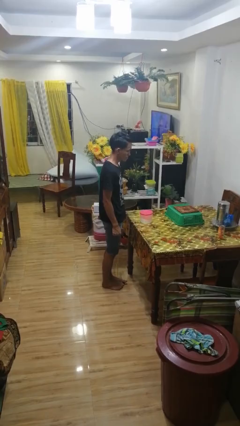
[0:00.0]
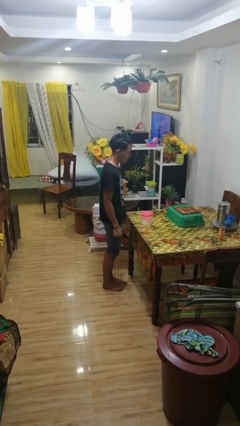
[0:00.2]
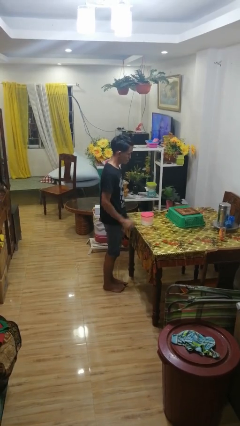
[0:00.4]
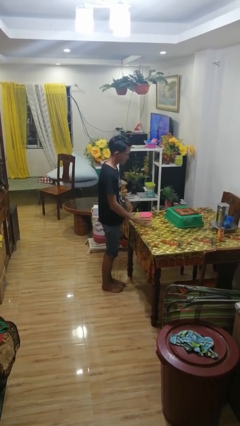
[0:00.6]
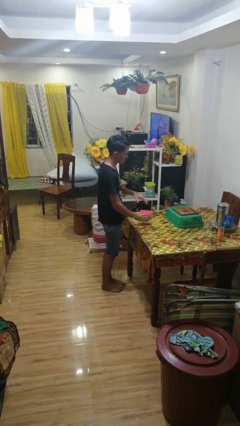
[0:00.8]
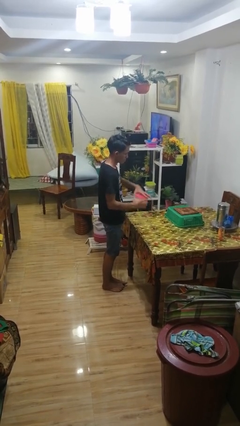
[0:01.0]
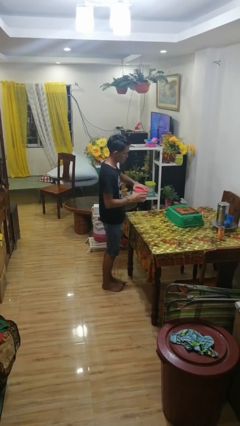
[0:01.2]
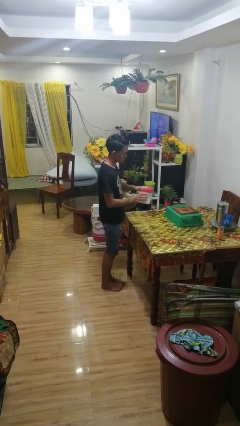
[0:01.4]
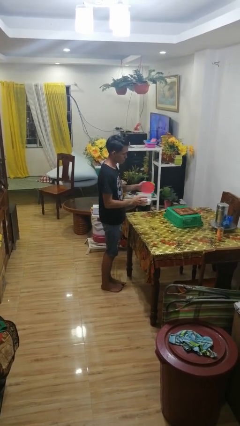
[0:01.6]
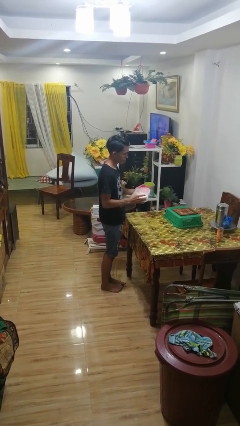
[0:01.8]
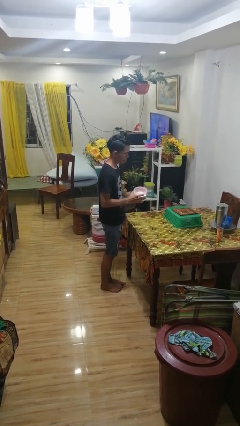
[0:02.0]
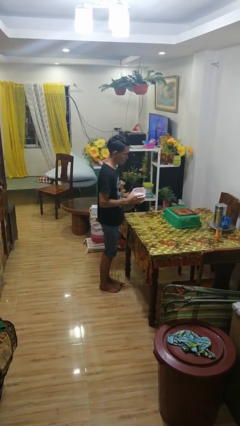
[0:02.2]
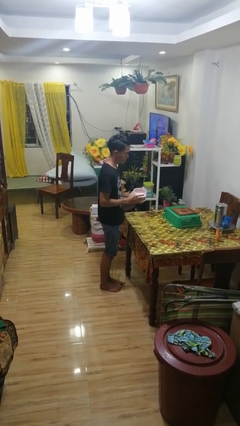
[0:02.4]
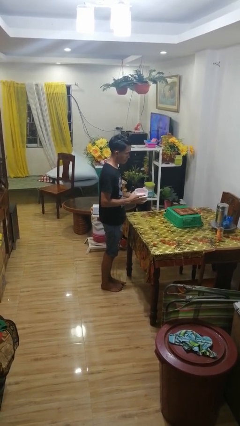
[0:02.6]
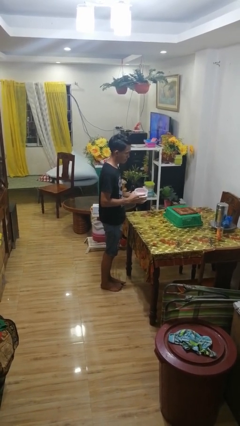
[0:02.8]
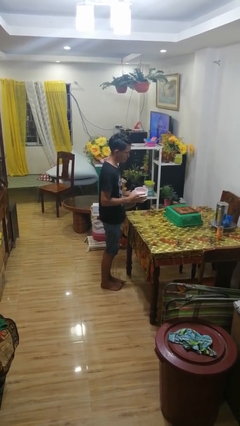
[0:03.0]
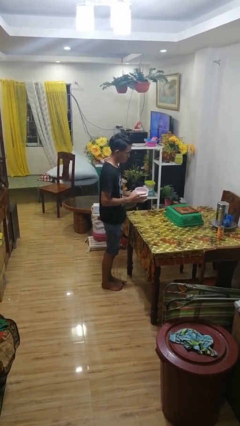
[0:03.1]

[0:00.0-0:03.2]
person opens jar

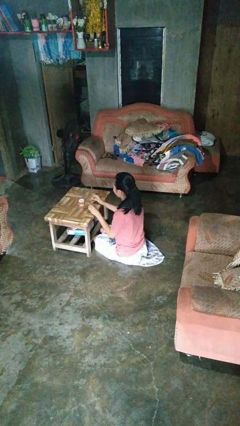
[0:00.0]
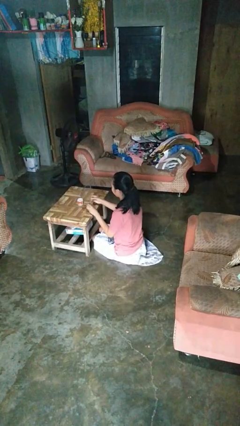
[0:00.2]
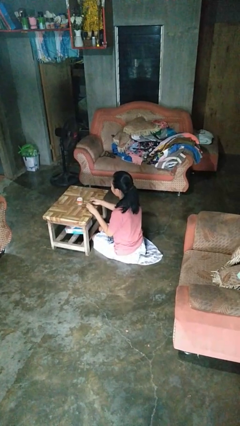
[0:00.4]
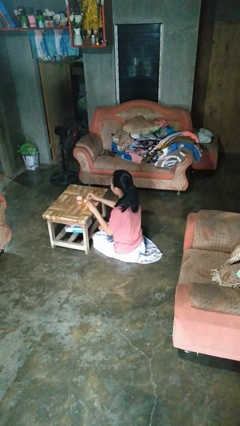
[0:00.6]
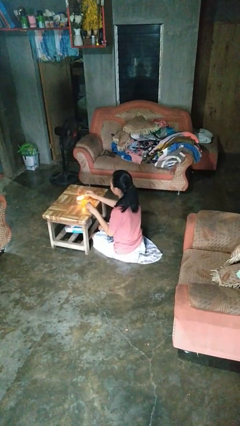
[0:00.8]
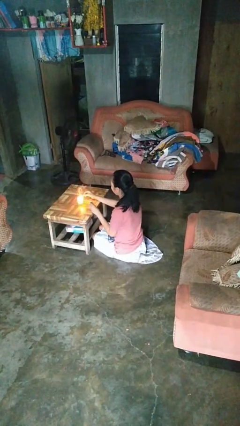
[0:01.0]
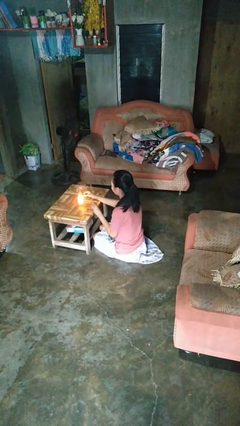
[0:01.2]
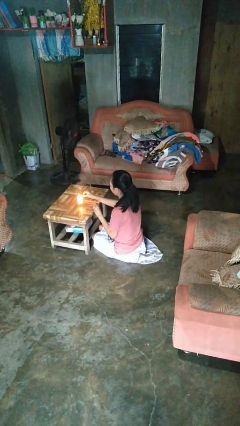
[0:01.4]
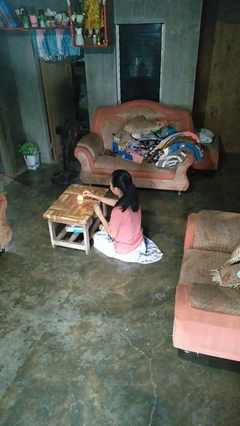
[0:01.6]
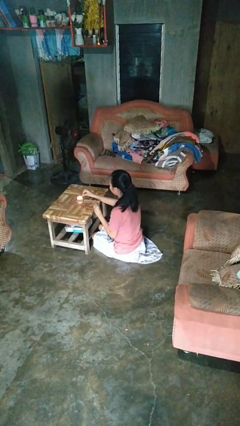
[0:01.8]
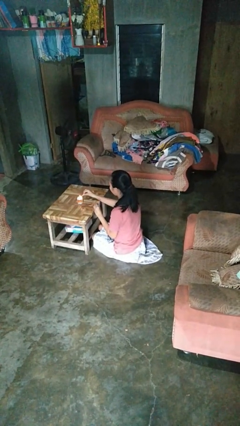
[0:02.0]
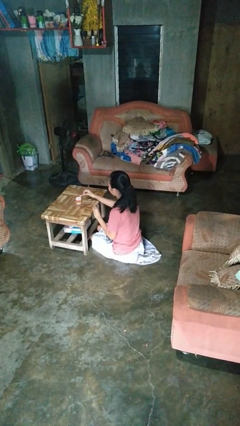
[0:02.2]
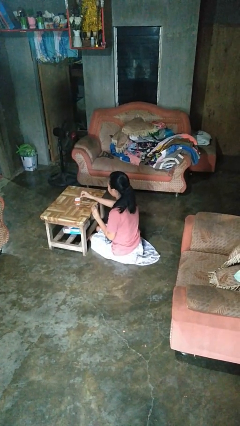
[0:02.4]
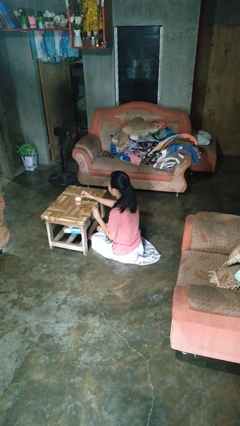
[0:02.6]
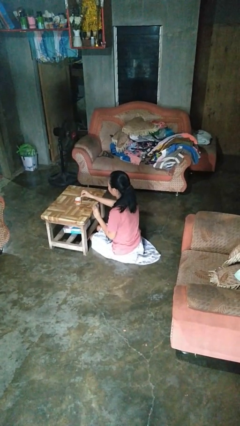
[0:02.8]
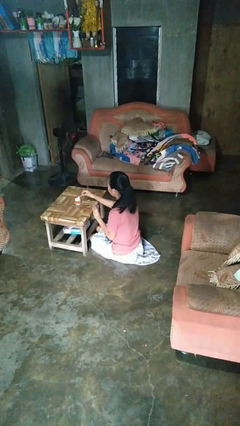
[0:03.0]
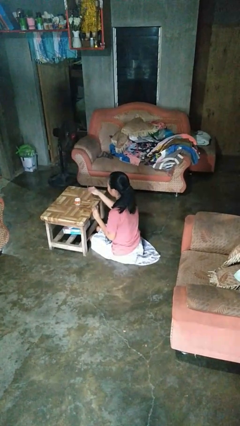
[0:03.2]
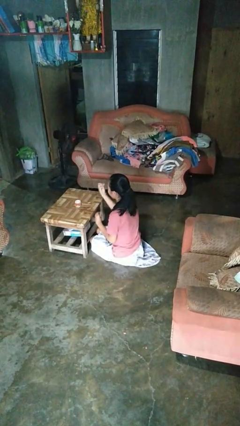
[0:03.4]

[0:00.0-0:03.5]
person lights candle

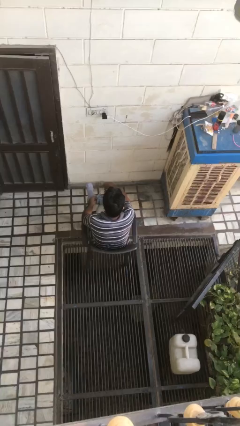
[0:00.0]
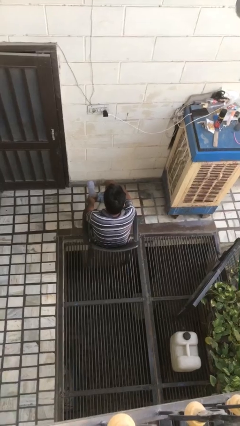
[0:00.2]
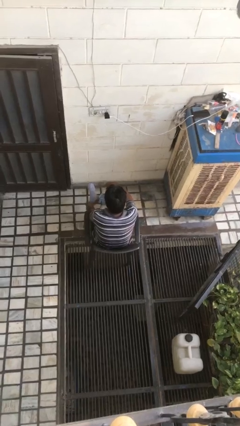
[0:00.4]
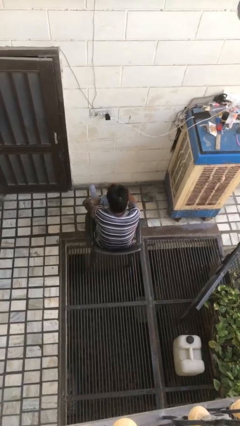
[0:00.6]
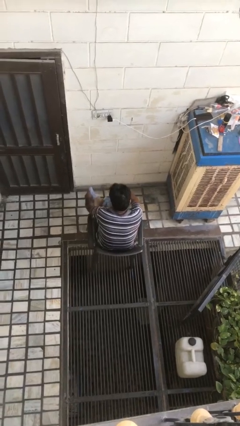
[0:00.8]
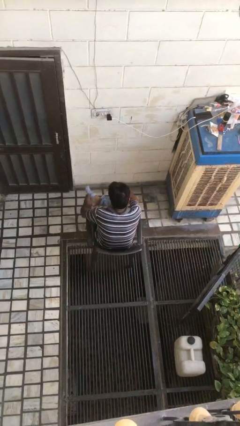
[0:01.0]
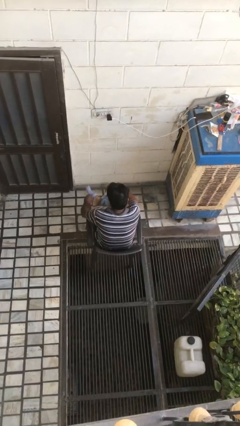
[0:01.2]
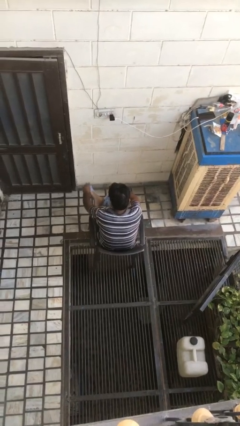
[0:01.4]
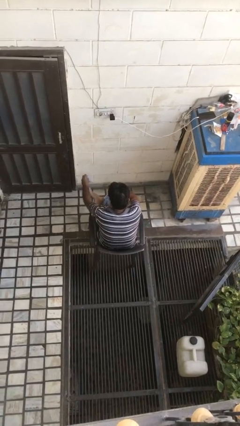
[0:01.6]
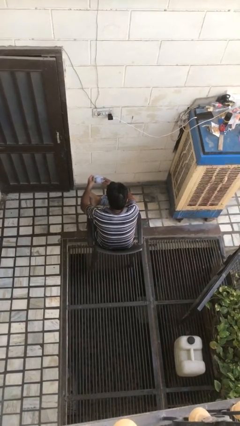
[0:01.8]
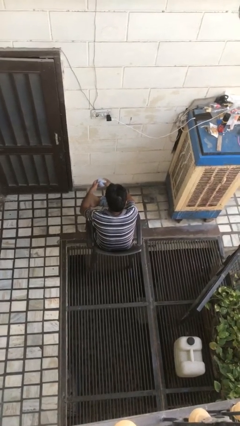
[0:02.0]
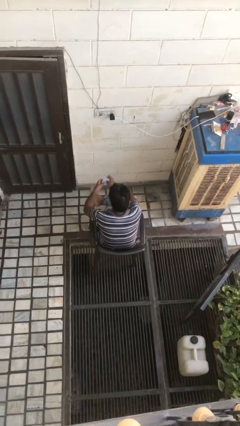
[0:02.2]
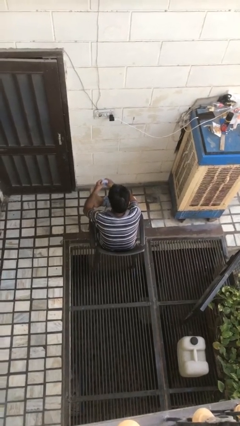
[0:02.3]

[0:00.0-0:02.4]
person takes off socks

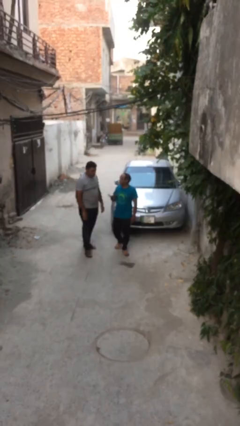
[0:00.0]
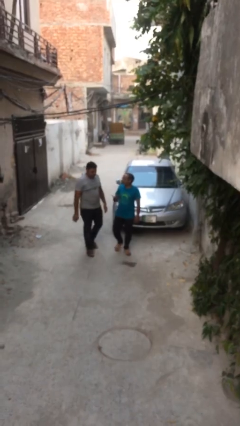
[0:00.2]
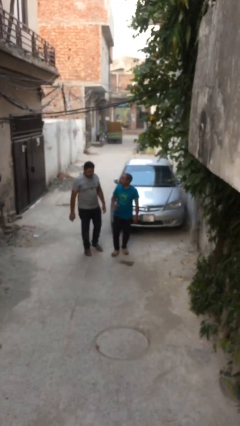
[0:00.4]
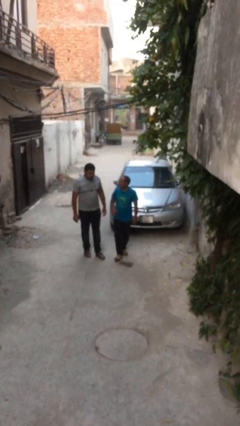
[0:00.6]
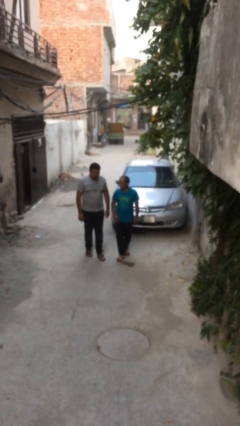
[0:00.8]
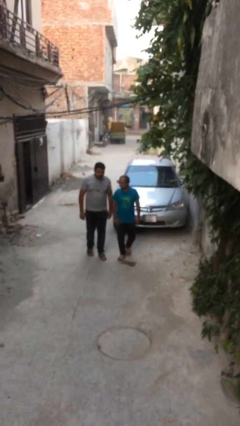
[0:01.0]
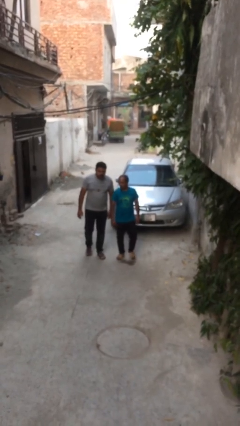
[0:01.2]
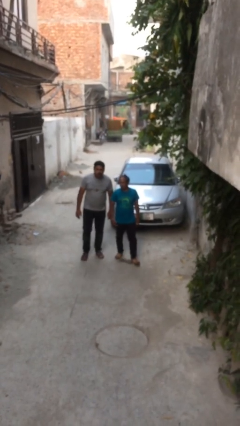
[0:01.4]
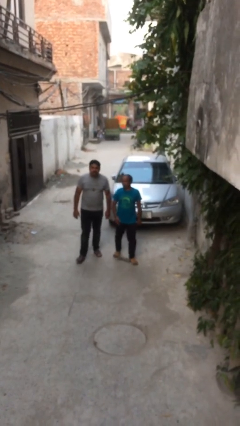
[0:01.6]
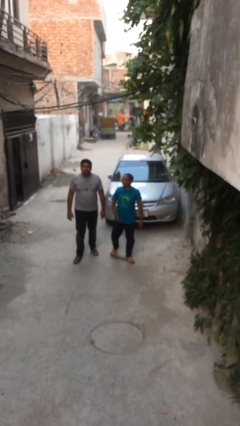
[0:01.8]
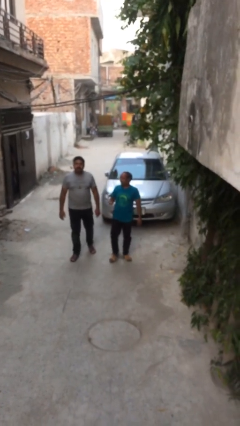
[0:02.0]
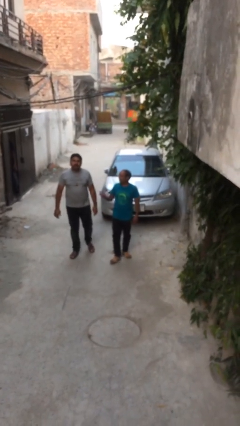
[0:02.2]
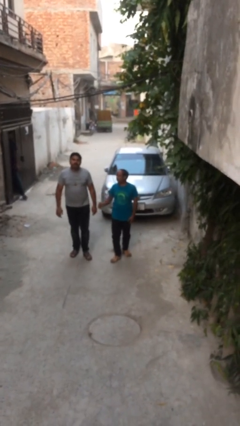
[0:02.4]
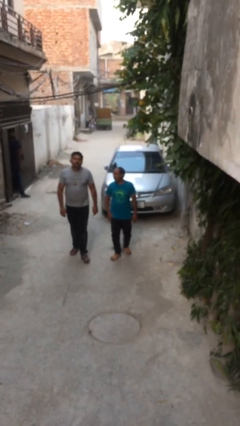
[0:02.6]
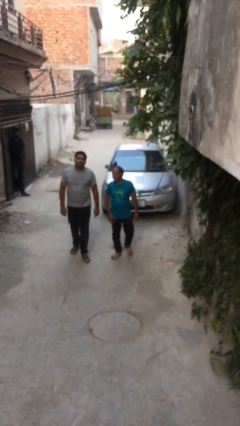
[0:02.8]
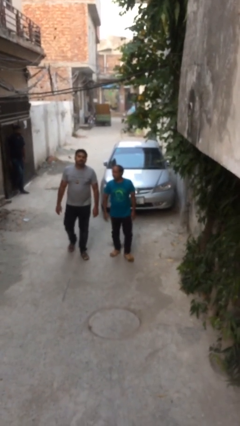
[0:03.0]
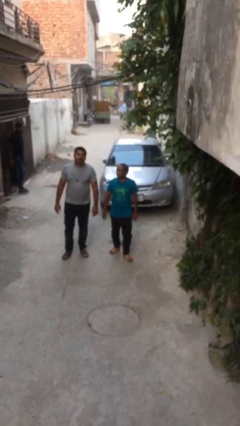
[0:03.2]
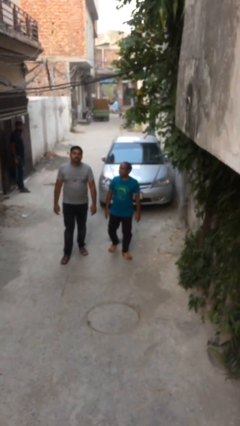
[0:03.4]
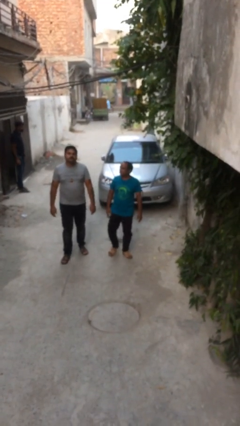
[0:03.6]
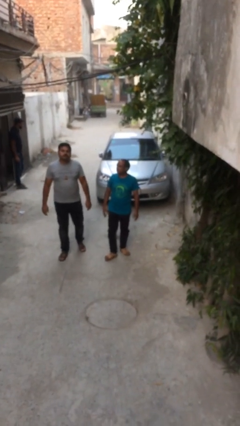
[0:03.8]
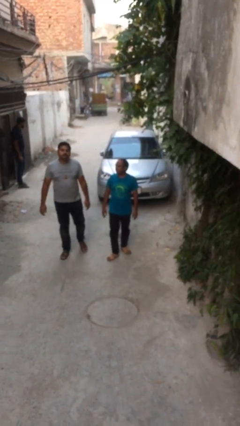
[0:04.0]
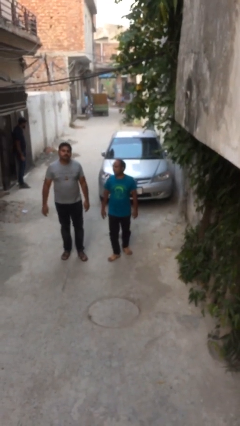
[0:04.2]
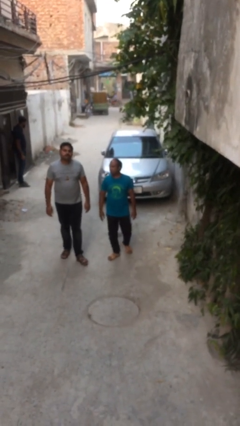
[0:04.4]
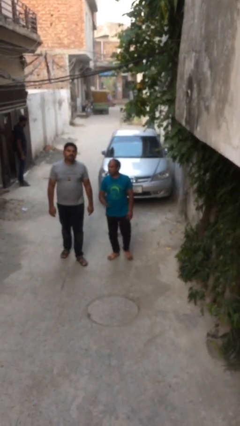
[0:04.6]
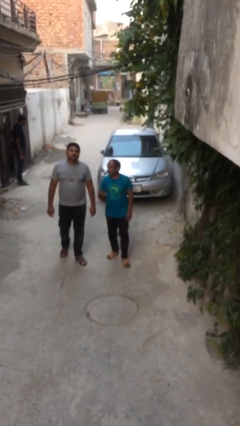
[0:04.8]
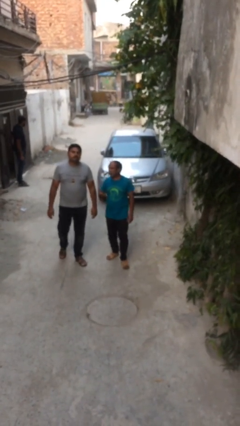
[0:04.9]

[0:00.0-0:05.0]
person talks to person

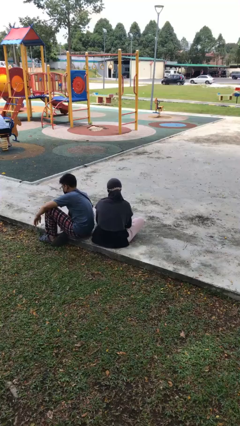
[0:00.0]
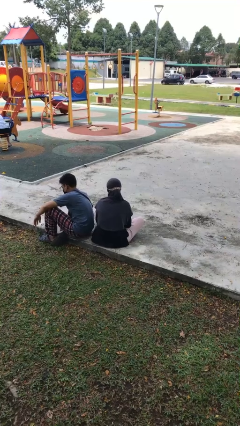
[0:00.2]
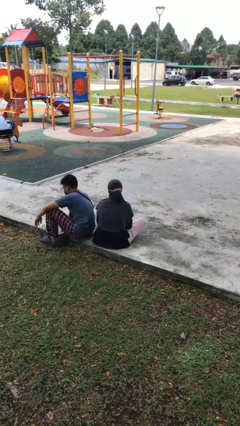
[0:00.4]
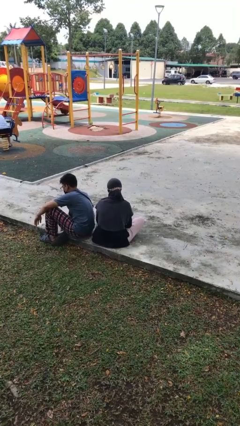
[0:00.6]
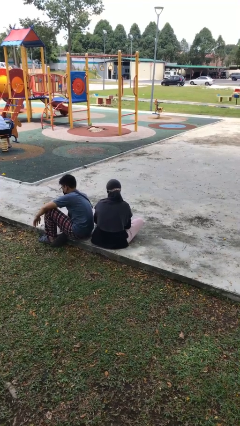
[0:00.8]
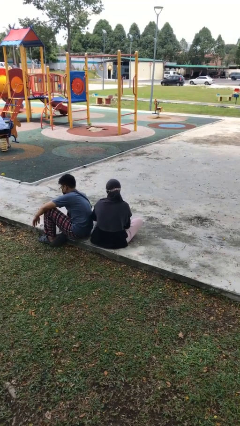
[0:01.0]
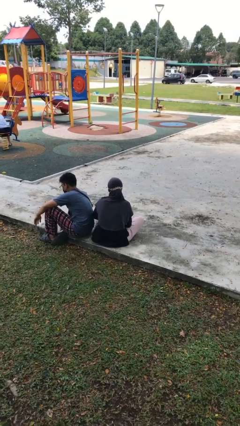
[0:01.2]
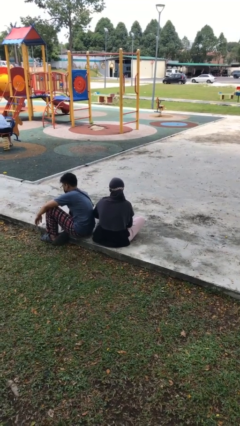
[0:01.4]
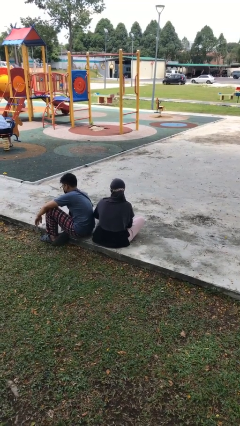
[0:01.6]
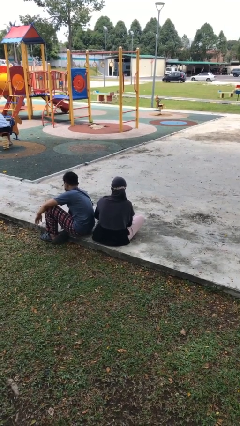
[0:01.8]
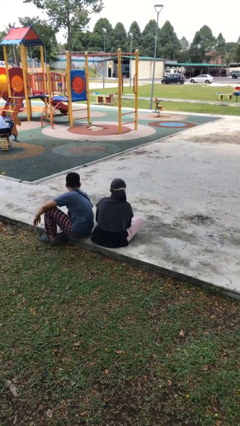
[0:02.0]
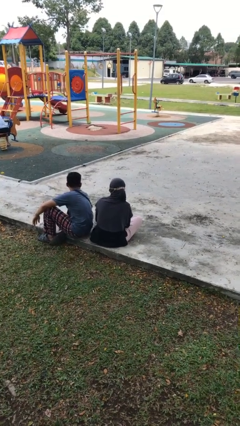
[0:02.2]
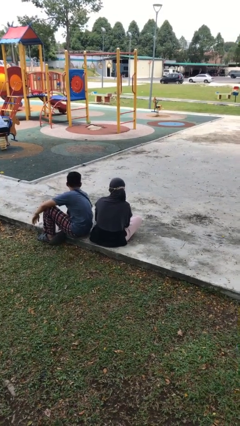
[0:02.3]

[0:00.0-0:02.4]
person nudges person with elbow

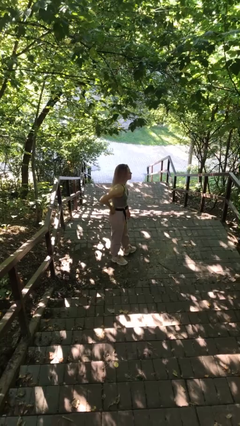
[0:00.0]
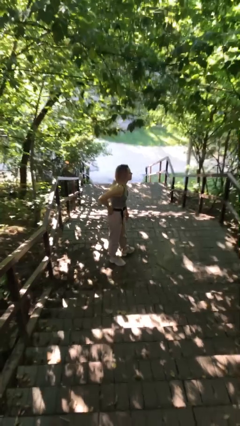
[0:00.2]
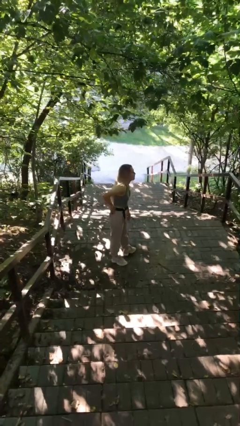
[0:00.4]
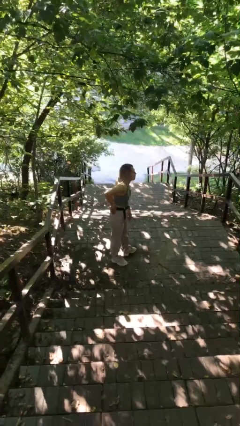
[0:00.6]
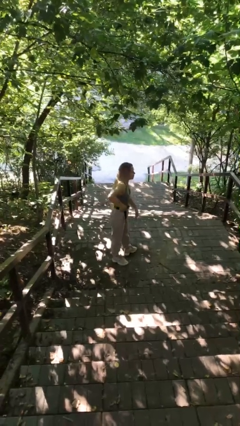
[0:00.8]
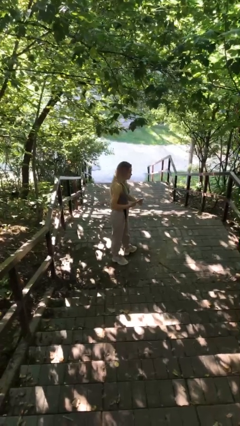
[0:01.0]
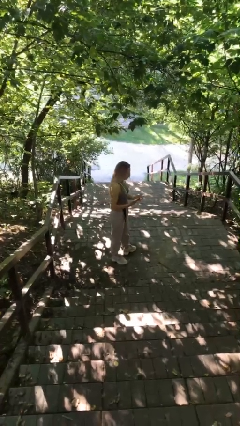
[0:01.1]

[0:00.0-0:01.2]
person takes phone from pocket

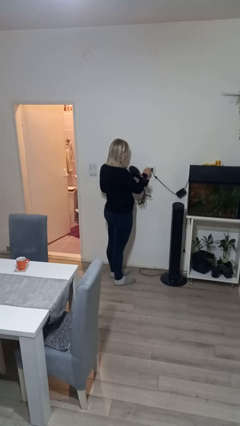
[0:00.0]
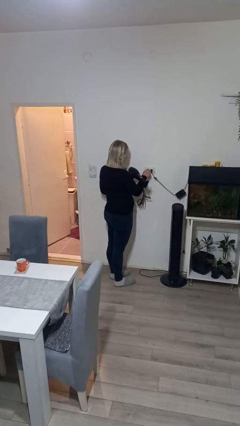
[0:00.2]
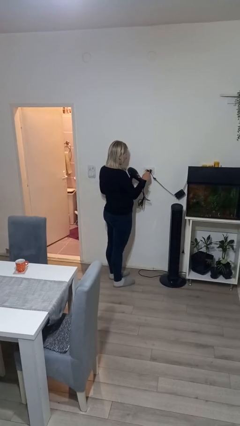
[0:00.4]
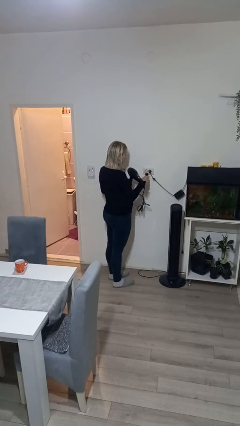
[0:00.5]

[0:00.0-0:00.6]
person unplugs from electrical socket
